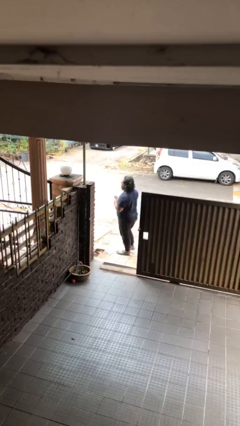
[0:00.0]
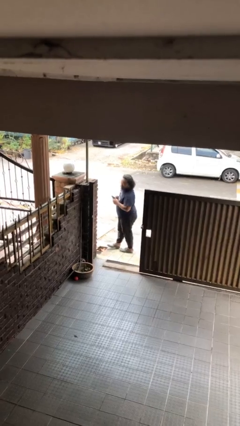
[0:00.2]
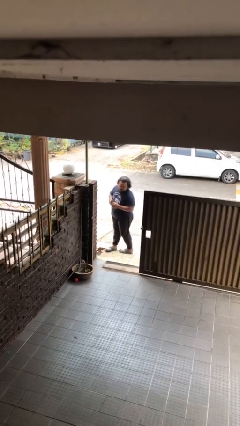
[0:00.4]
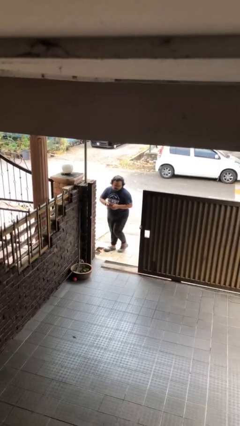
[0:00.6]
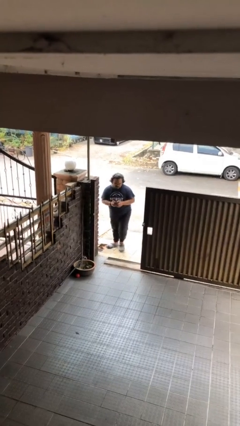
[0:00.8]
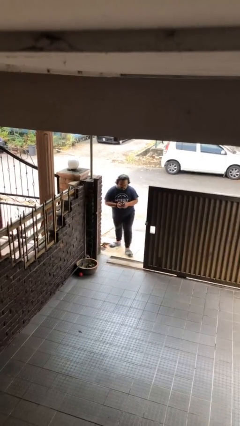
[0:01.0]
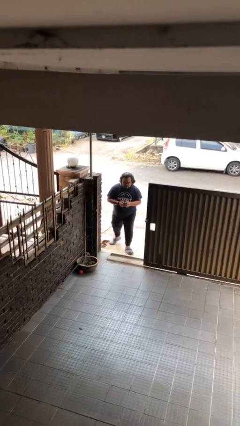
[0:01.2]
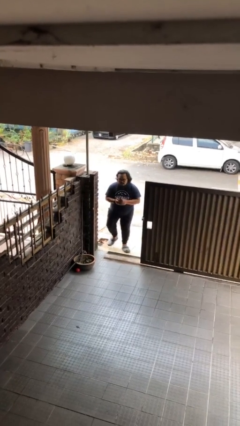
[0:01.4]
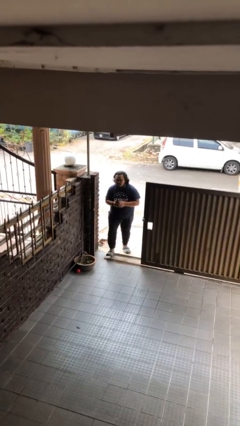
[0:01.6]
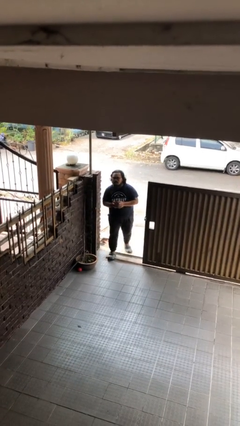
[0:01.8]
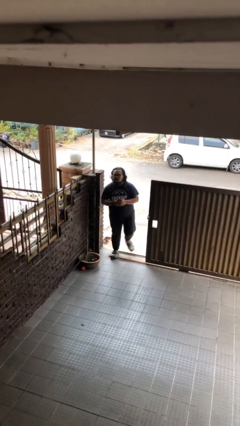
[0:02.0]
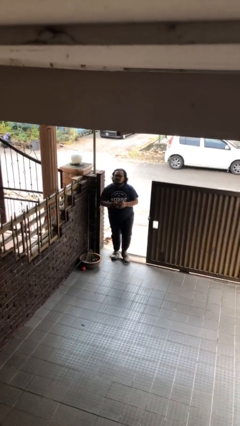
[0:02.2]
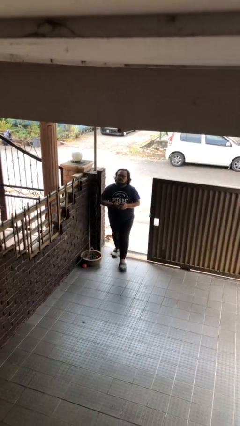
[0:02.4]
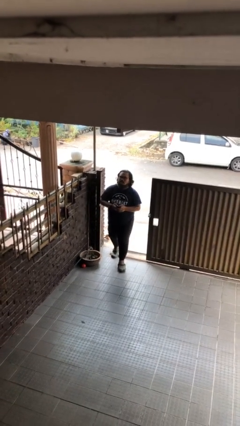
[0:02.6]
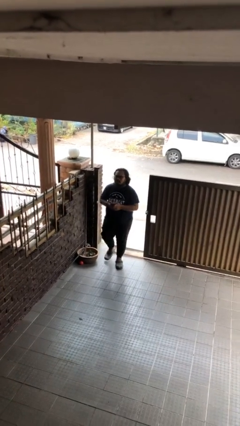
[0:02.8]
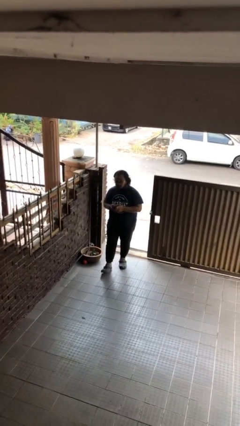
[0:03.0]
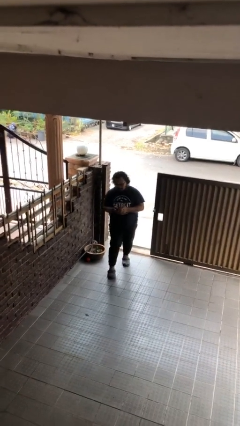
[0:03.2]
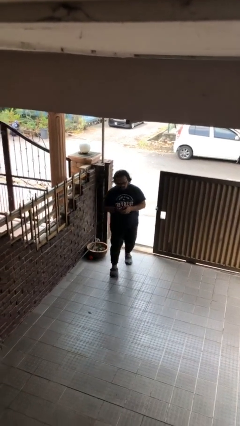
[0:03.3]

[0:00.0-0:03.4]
person enters scene through structure

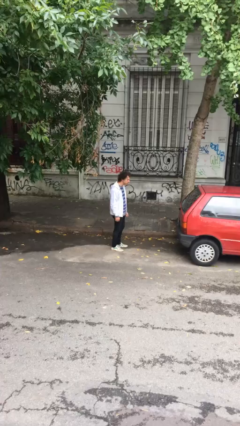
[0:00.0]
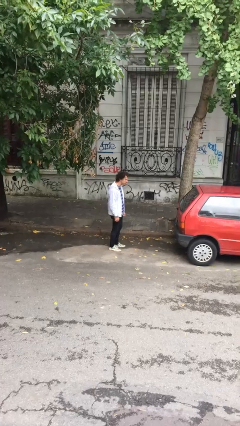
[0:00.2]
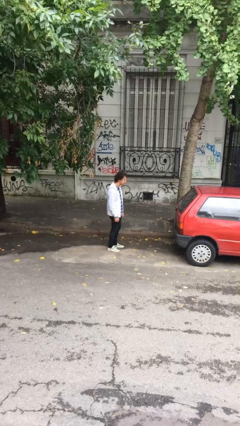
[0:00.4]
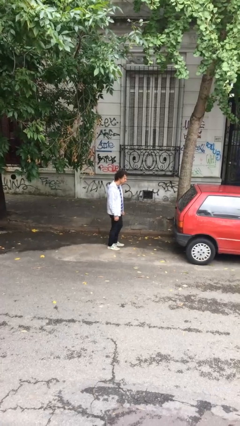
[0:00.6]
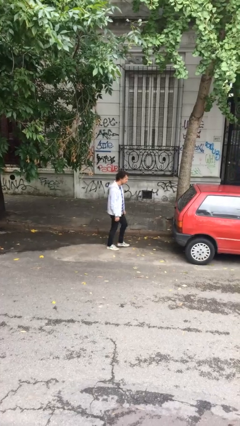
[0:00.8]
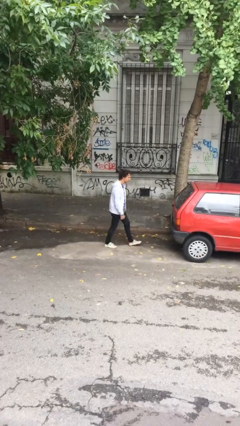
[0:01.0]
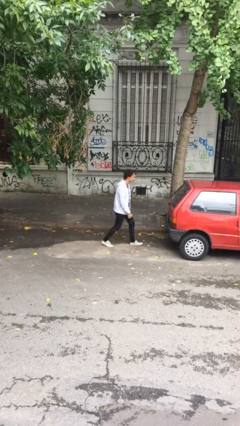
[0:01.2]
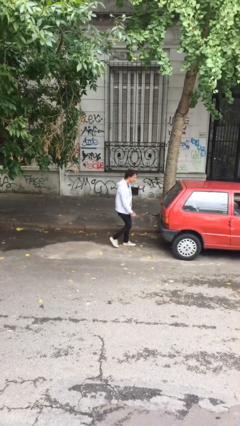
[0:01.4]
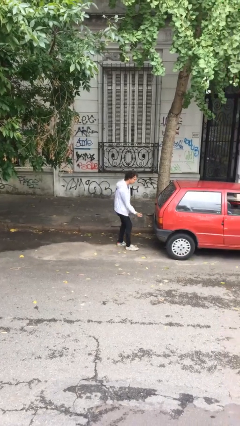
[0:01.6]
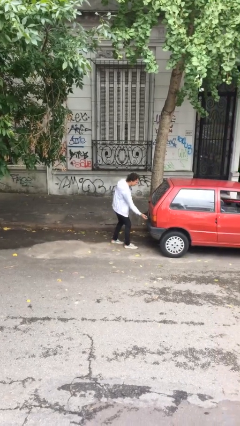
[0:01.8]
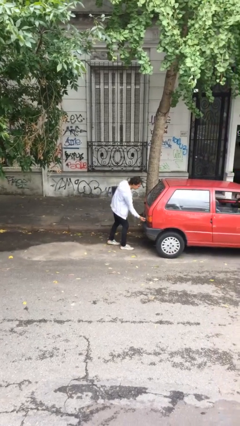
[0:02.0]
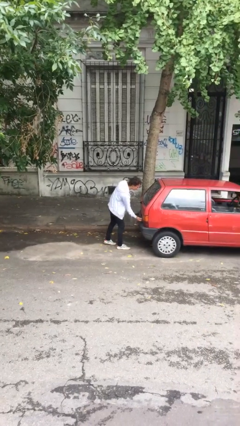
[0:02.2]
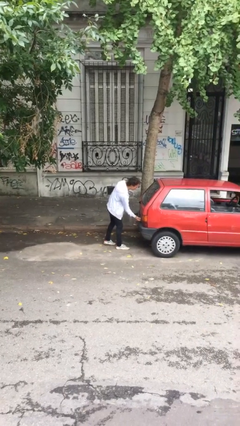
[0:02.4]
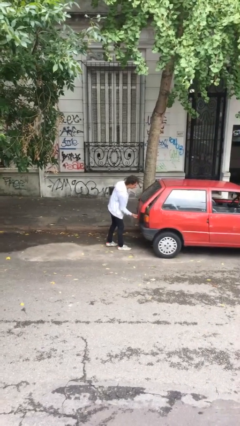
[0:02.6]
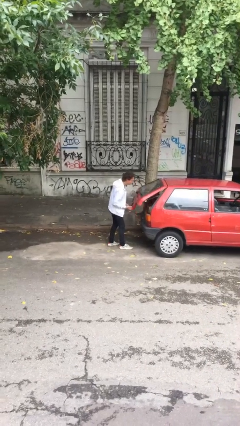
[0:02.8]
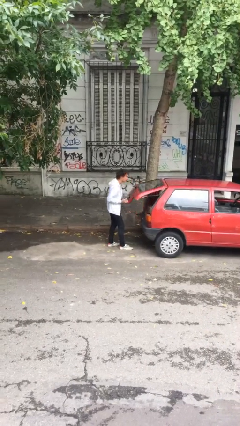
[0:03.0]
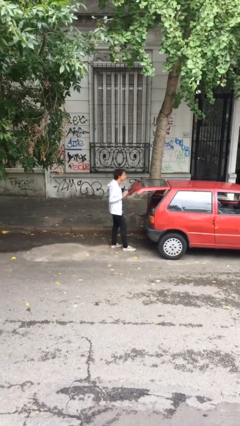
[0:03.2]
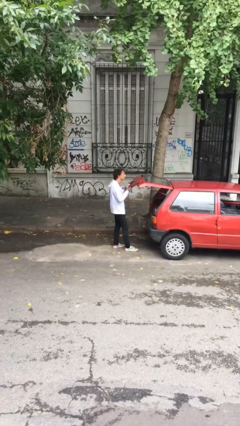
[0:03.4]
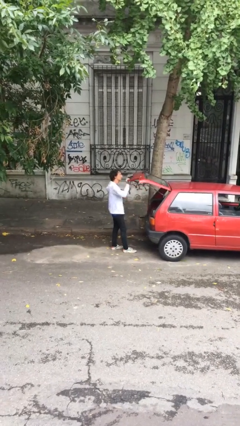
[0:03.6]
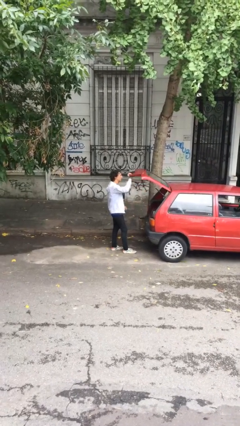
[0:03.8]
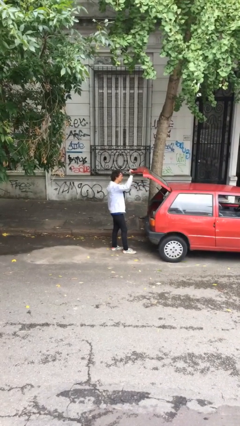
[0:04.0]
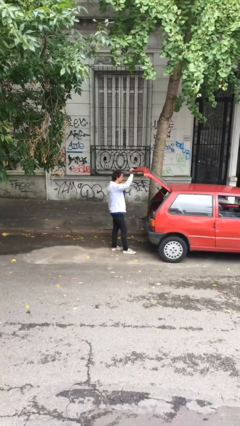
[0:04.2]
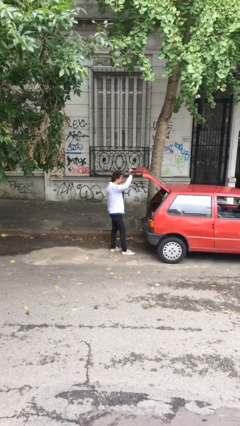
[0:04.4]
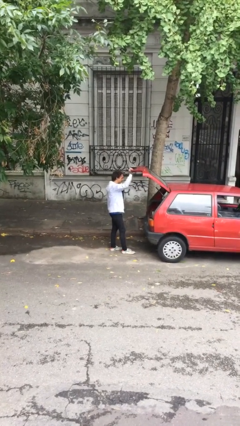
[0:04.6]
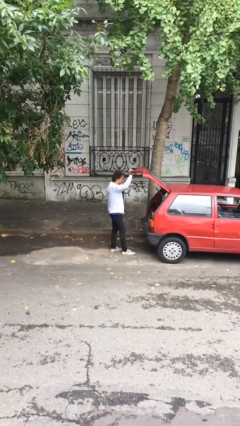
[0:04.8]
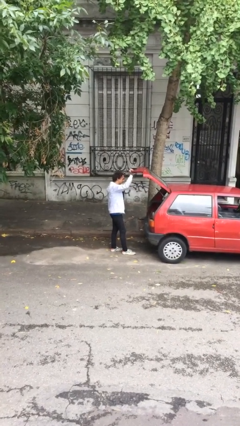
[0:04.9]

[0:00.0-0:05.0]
person opens car trunk

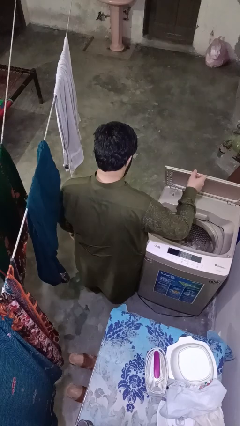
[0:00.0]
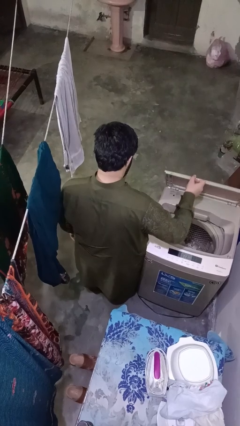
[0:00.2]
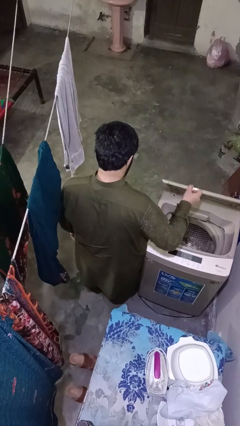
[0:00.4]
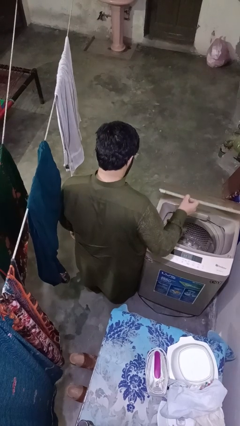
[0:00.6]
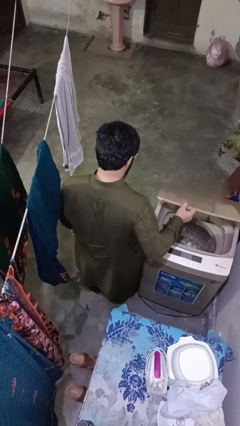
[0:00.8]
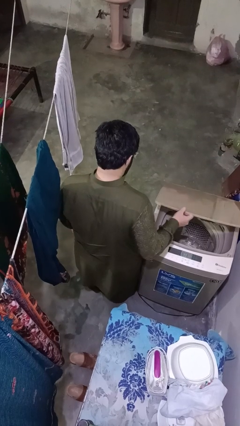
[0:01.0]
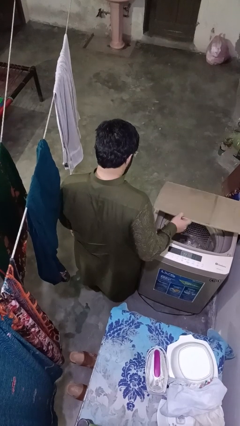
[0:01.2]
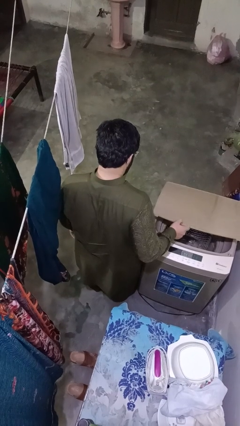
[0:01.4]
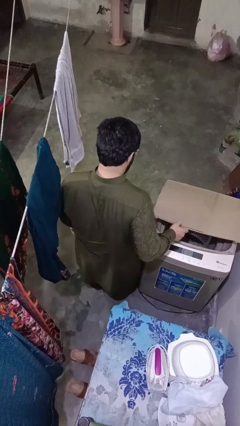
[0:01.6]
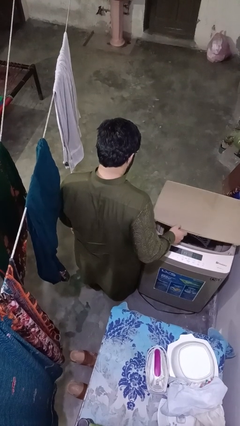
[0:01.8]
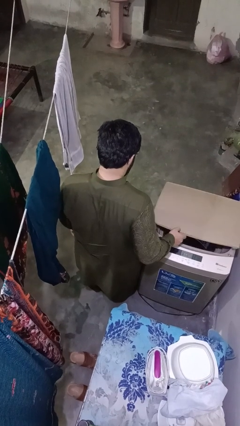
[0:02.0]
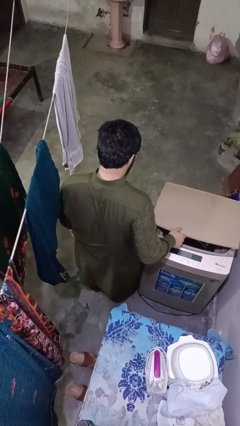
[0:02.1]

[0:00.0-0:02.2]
person closes clothes washer

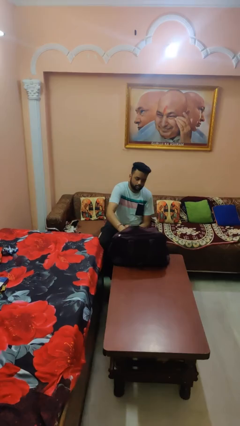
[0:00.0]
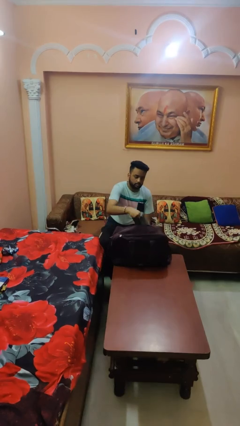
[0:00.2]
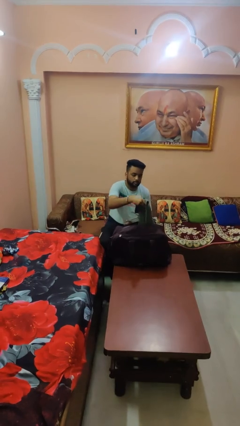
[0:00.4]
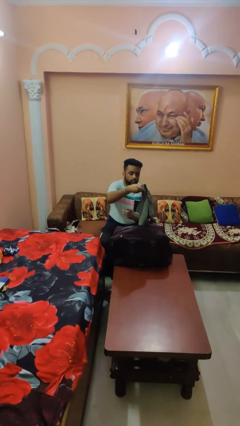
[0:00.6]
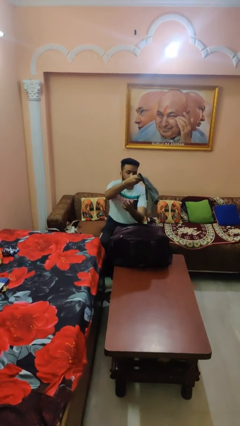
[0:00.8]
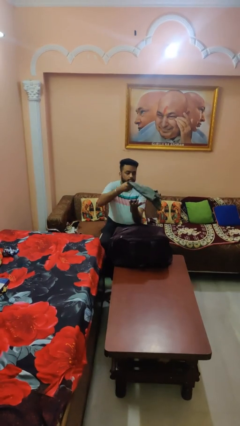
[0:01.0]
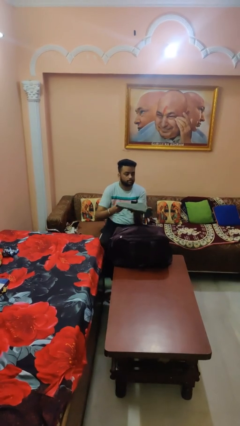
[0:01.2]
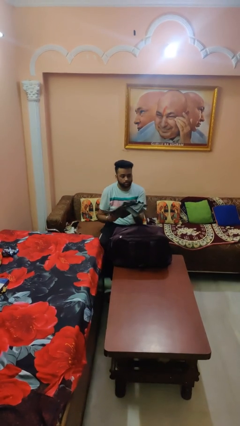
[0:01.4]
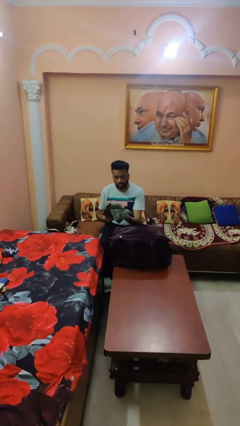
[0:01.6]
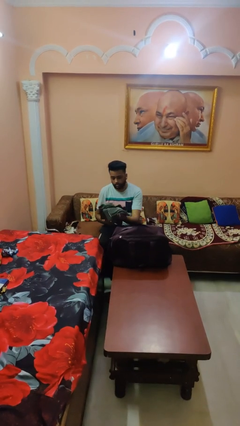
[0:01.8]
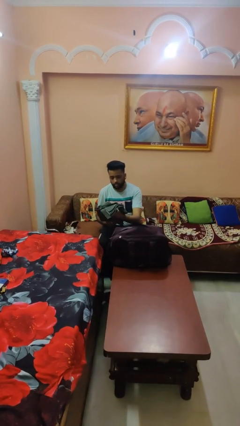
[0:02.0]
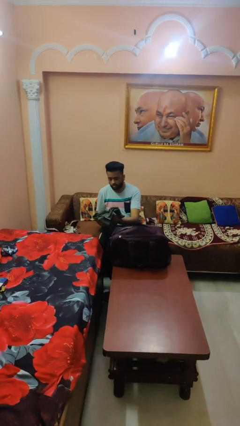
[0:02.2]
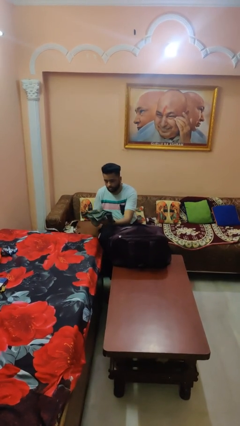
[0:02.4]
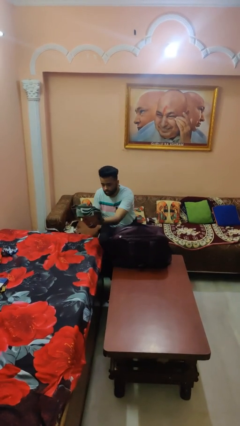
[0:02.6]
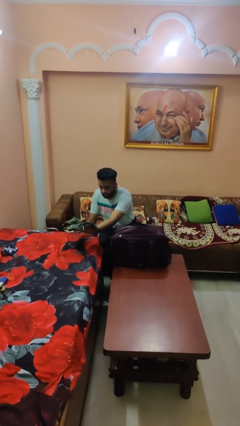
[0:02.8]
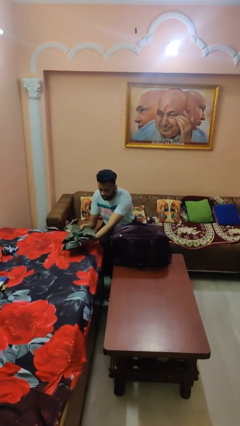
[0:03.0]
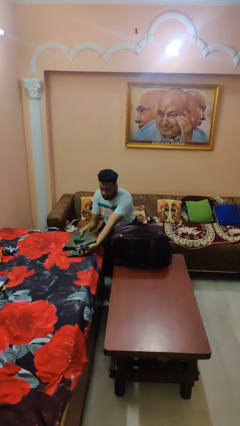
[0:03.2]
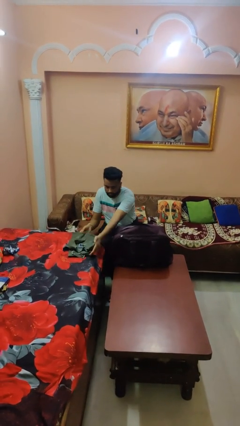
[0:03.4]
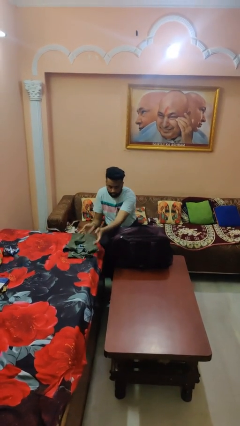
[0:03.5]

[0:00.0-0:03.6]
person unloads clothes from suitcase

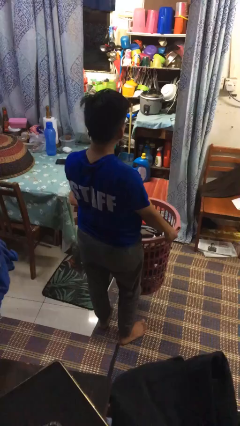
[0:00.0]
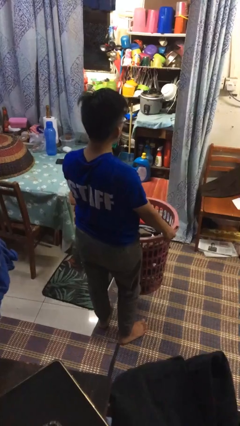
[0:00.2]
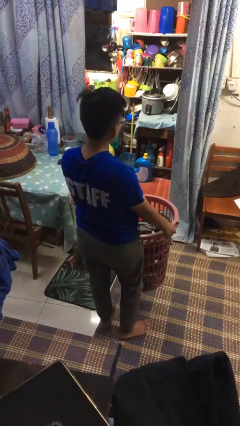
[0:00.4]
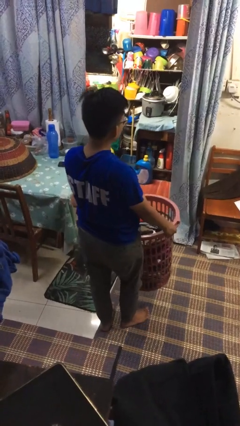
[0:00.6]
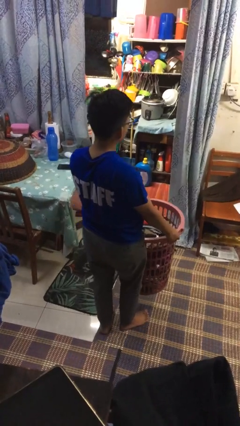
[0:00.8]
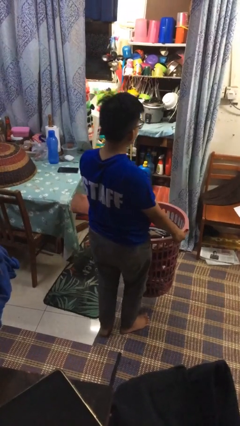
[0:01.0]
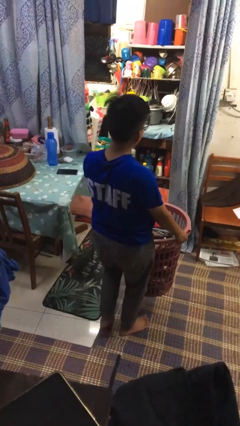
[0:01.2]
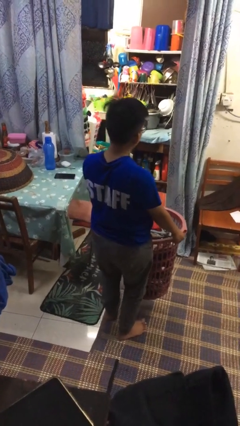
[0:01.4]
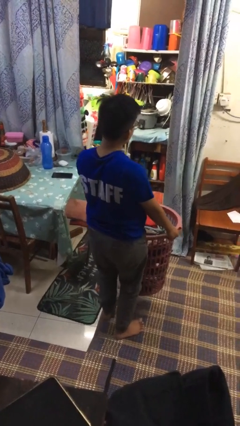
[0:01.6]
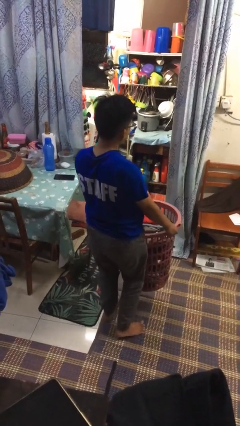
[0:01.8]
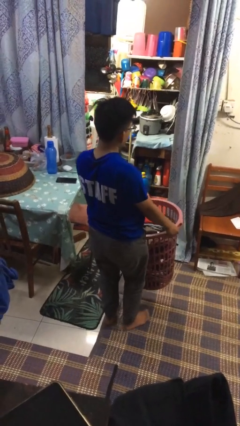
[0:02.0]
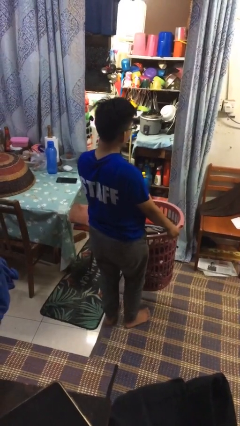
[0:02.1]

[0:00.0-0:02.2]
person carries laundry basket

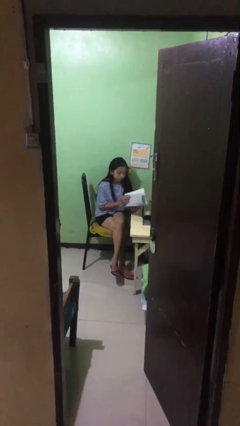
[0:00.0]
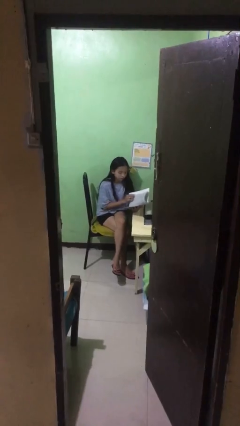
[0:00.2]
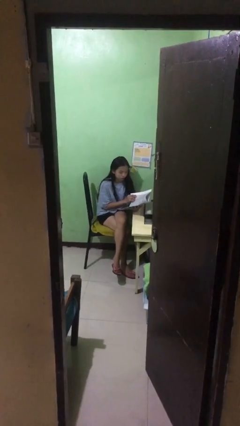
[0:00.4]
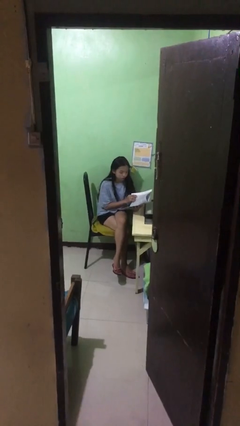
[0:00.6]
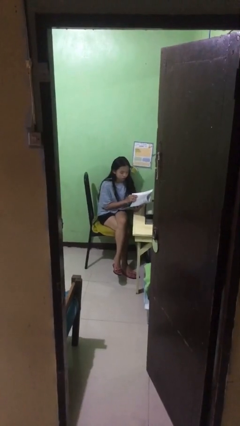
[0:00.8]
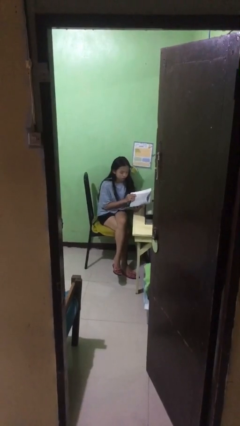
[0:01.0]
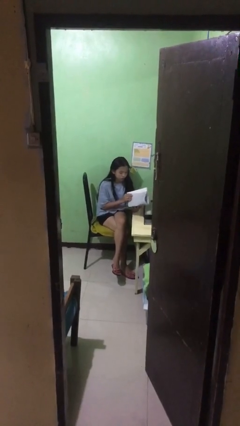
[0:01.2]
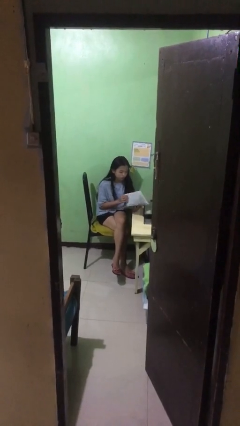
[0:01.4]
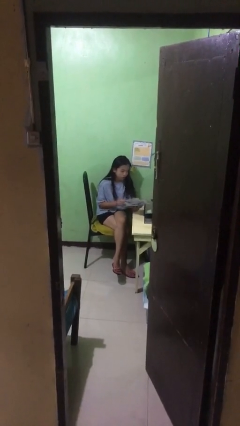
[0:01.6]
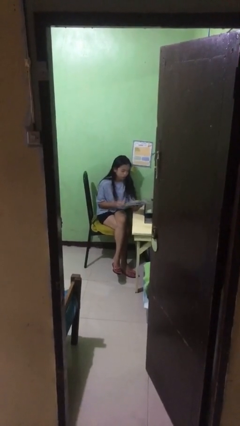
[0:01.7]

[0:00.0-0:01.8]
person reads document
